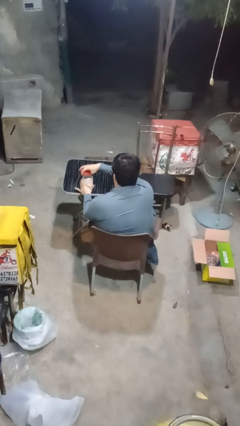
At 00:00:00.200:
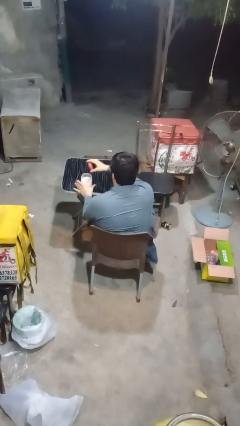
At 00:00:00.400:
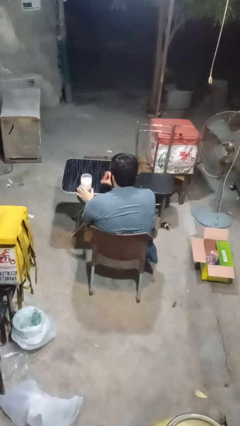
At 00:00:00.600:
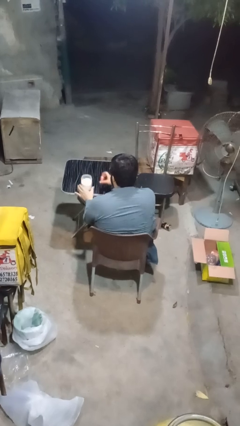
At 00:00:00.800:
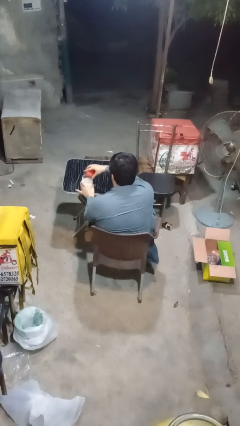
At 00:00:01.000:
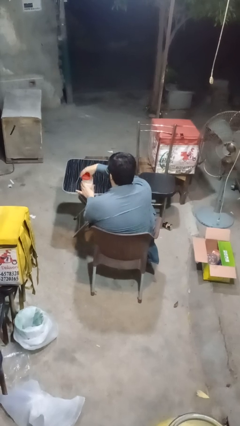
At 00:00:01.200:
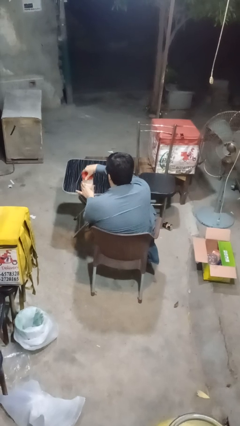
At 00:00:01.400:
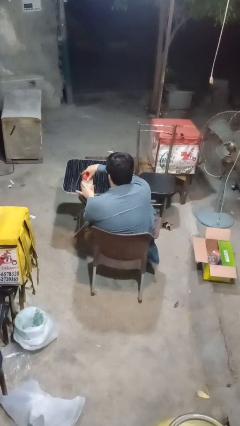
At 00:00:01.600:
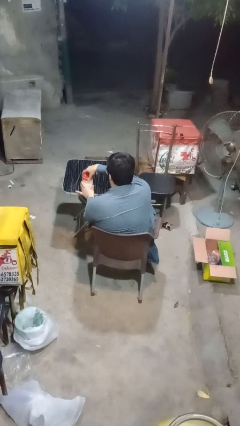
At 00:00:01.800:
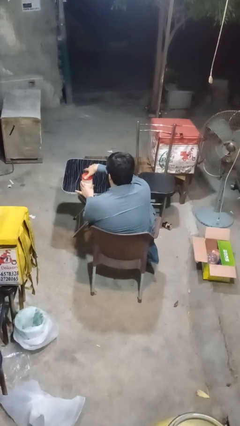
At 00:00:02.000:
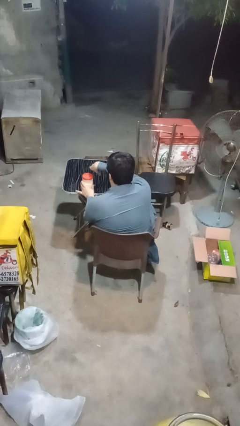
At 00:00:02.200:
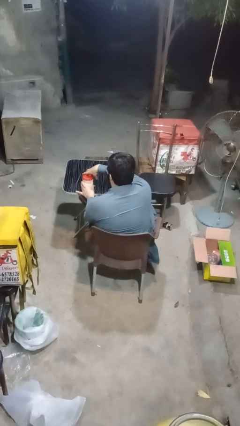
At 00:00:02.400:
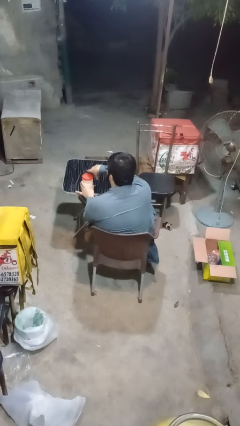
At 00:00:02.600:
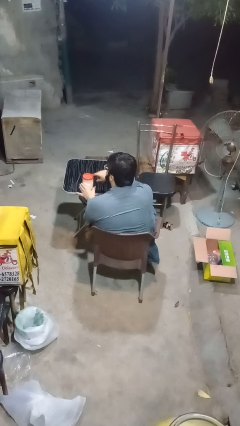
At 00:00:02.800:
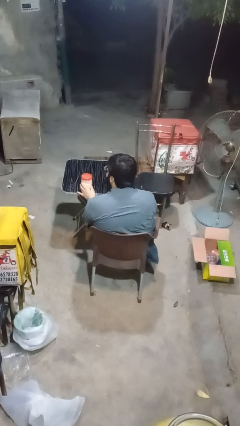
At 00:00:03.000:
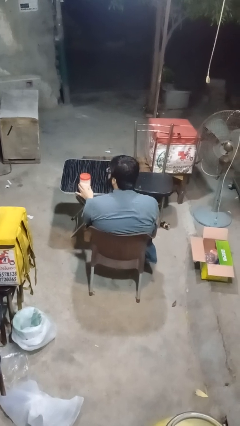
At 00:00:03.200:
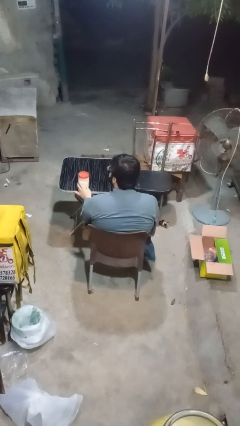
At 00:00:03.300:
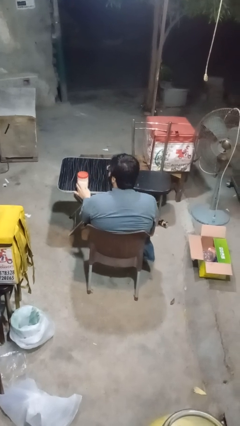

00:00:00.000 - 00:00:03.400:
person closes jar

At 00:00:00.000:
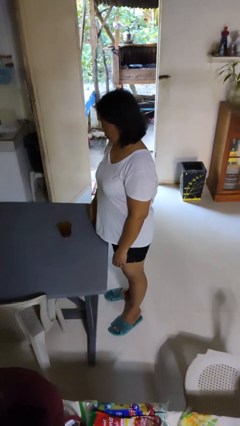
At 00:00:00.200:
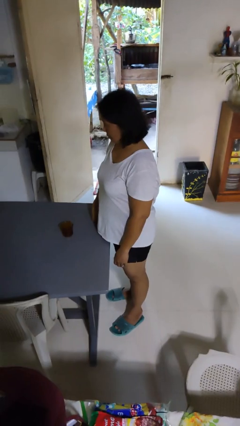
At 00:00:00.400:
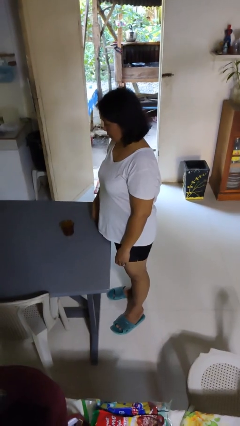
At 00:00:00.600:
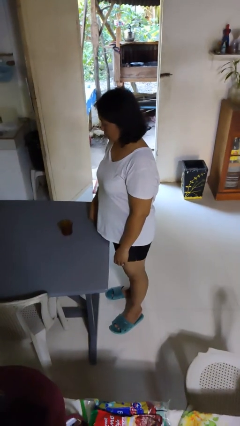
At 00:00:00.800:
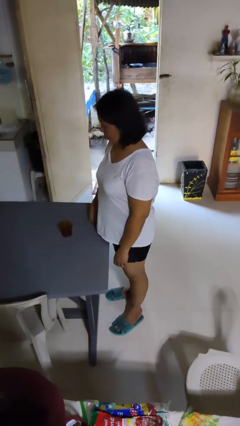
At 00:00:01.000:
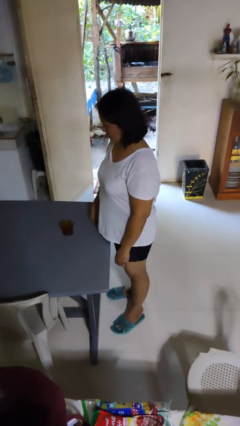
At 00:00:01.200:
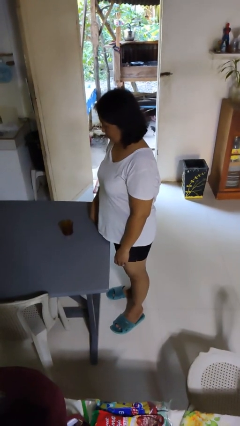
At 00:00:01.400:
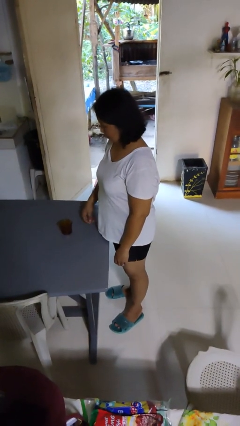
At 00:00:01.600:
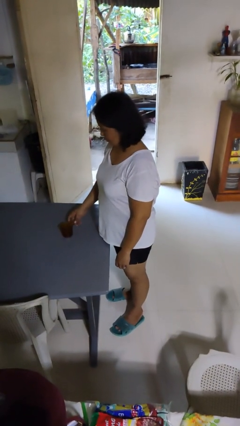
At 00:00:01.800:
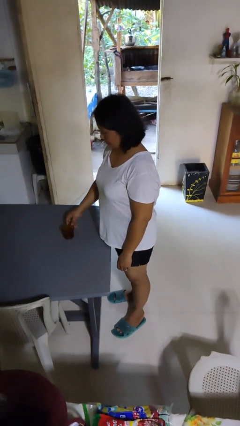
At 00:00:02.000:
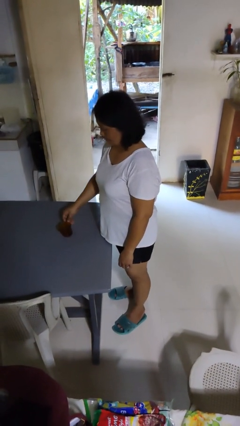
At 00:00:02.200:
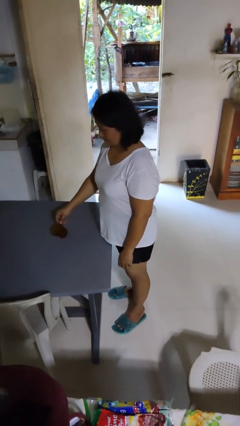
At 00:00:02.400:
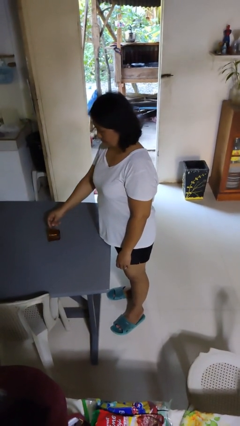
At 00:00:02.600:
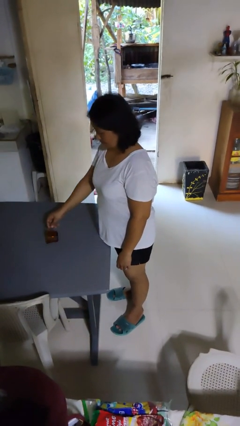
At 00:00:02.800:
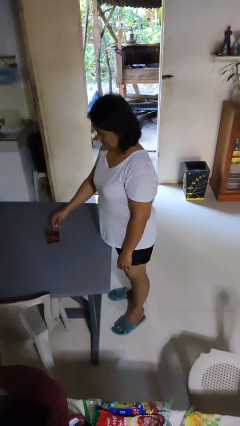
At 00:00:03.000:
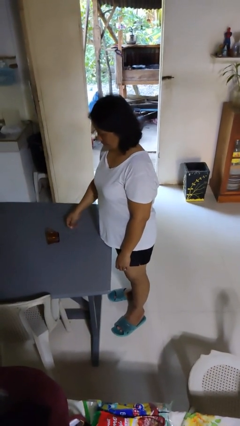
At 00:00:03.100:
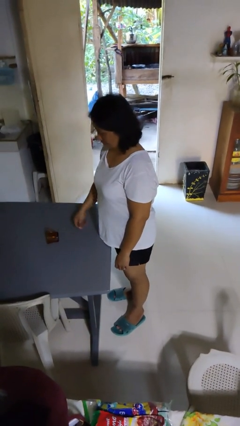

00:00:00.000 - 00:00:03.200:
person knocks over glass

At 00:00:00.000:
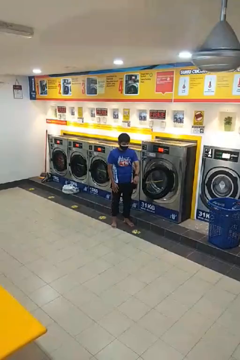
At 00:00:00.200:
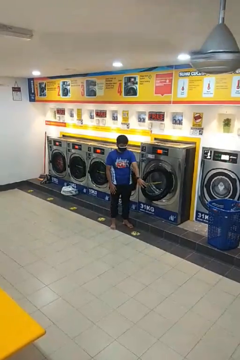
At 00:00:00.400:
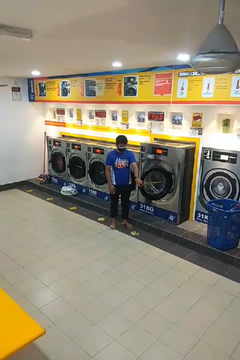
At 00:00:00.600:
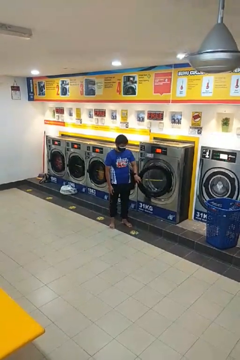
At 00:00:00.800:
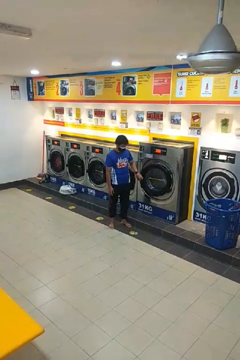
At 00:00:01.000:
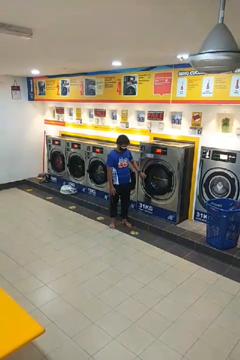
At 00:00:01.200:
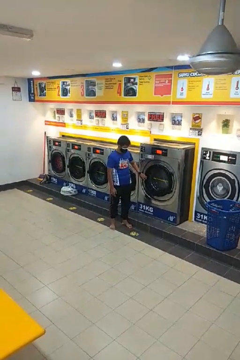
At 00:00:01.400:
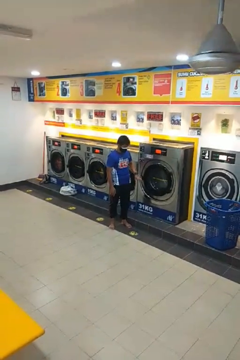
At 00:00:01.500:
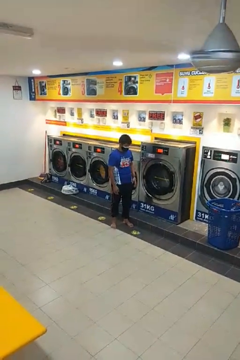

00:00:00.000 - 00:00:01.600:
person closes clothes washer

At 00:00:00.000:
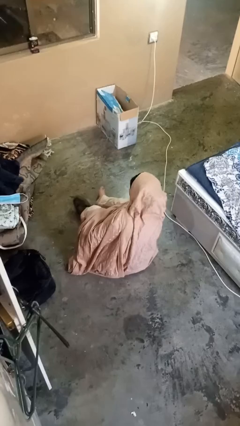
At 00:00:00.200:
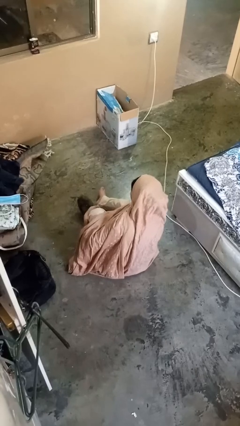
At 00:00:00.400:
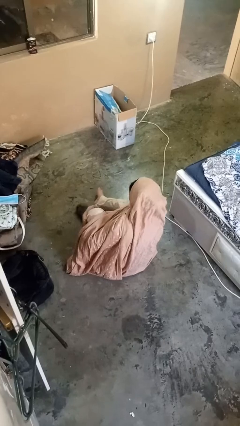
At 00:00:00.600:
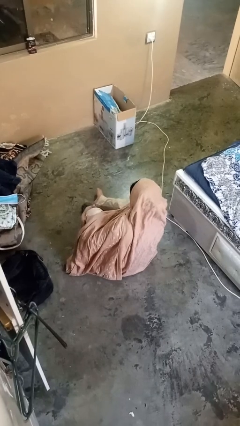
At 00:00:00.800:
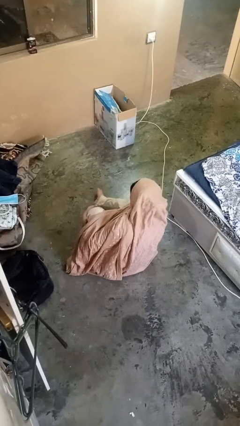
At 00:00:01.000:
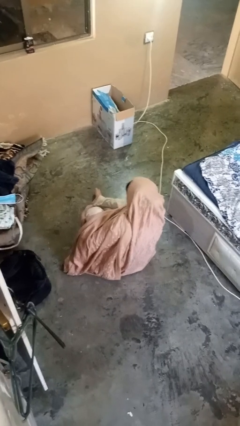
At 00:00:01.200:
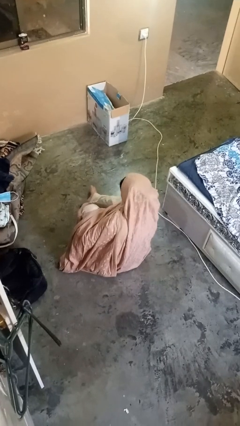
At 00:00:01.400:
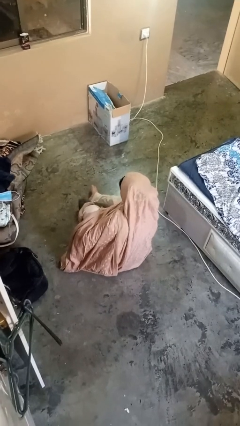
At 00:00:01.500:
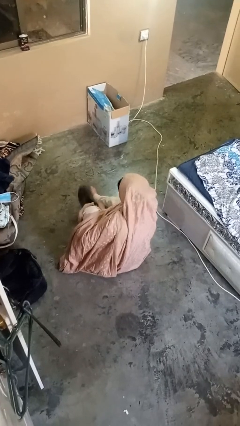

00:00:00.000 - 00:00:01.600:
person puts on shoes

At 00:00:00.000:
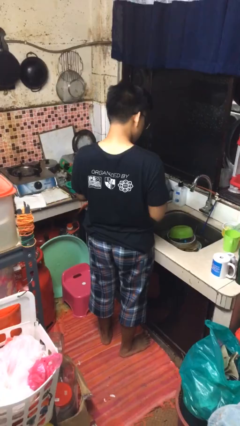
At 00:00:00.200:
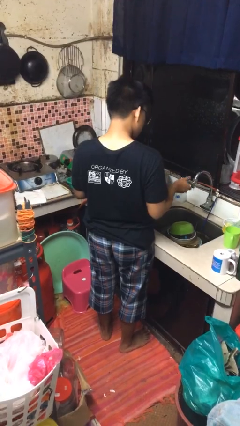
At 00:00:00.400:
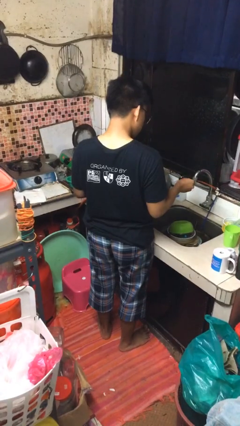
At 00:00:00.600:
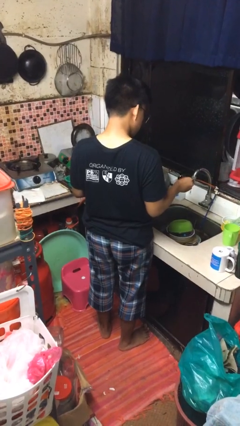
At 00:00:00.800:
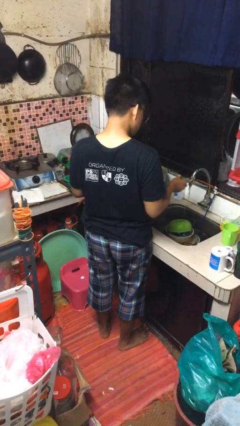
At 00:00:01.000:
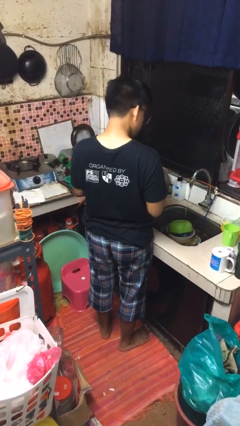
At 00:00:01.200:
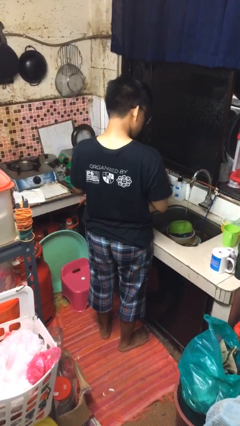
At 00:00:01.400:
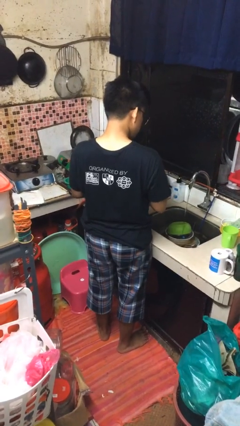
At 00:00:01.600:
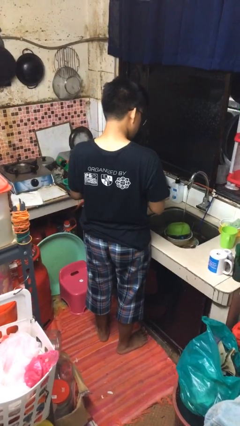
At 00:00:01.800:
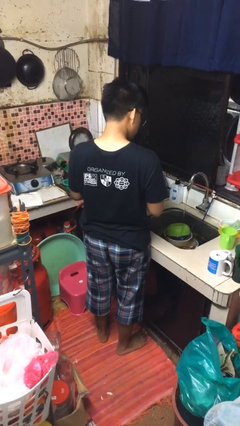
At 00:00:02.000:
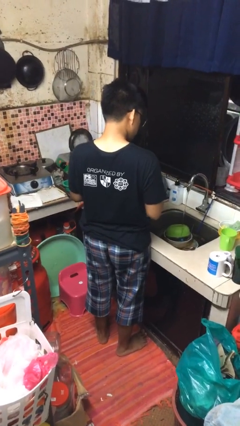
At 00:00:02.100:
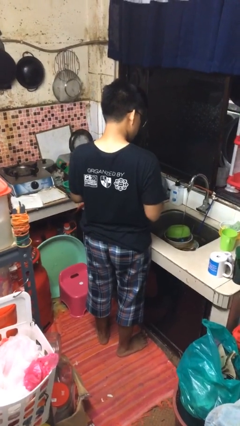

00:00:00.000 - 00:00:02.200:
person turns on faucet

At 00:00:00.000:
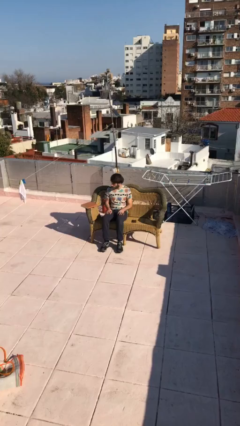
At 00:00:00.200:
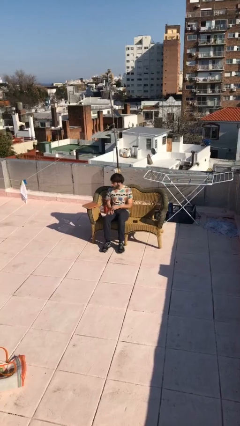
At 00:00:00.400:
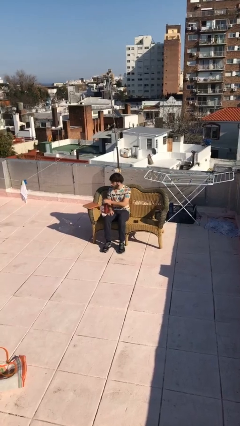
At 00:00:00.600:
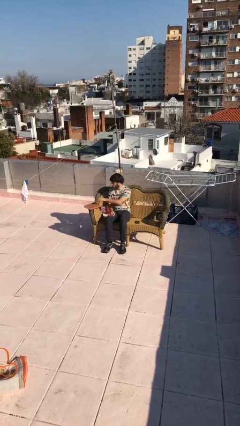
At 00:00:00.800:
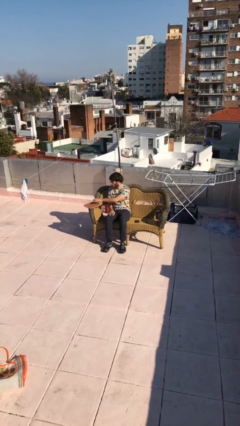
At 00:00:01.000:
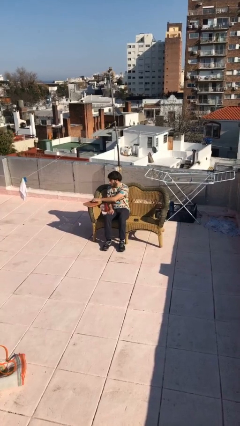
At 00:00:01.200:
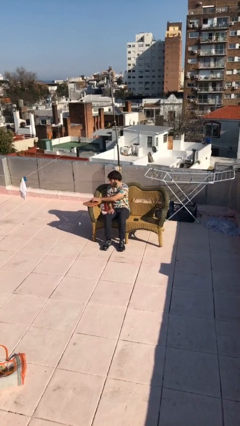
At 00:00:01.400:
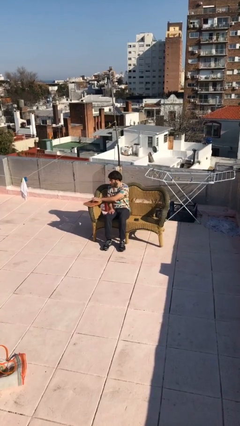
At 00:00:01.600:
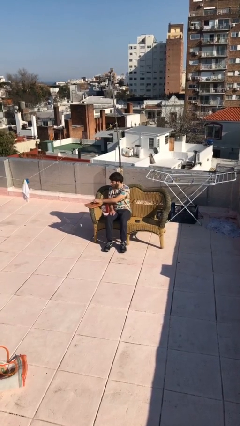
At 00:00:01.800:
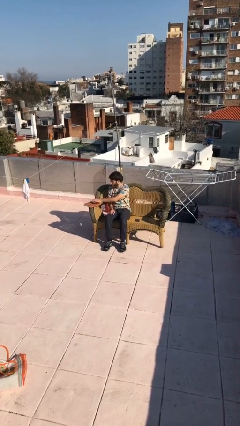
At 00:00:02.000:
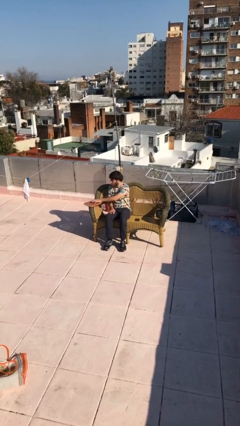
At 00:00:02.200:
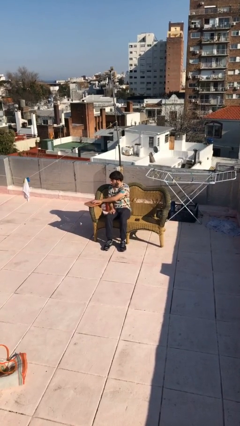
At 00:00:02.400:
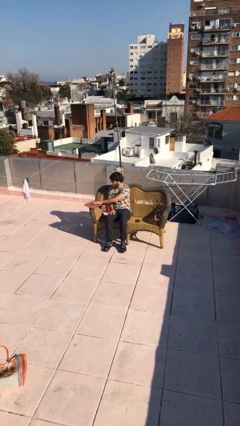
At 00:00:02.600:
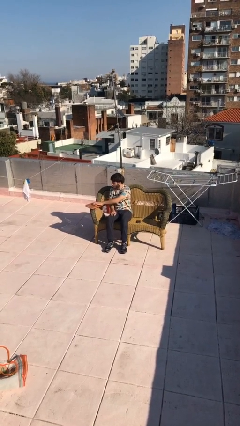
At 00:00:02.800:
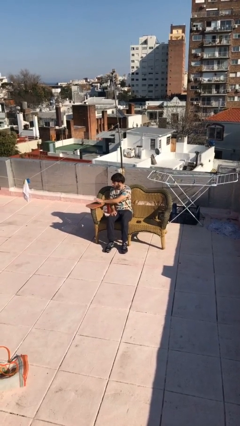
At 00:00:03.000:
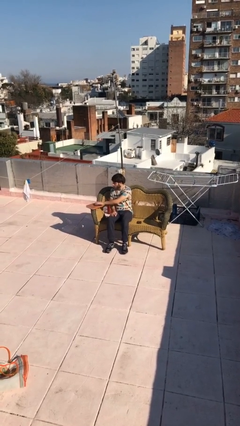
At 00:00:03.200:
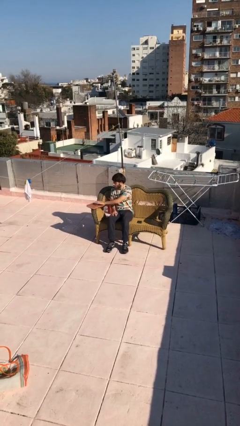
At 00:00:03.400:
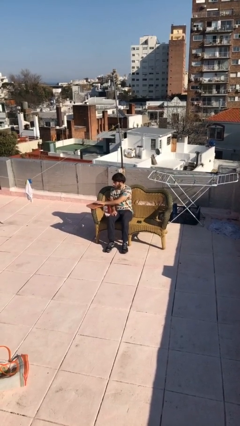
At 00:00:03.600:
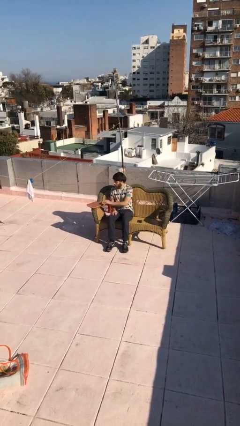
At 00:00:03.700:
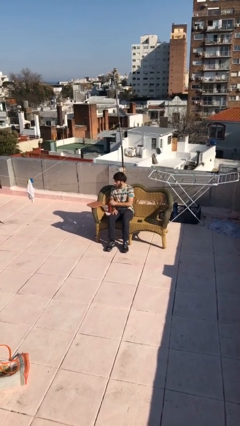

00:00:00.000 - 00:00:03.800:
person taps object with finger

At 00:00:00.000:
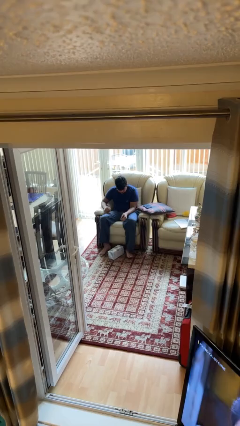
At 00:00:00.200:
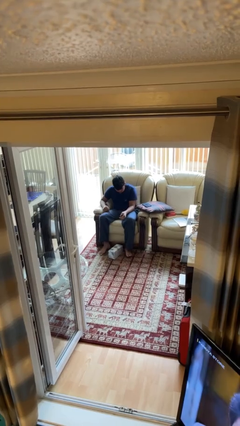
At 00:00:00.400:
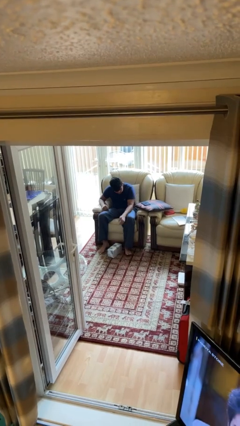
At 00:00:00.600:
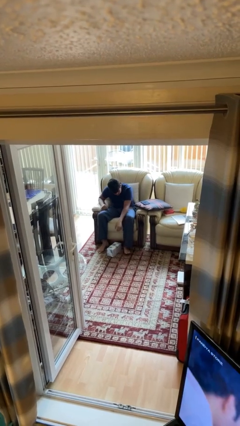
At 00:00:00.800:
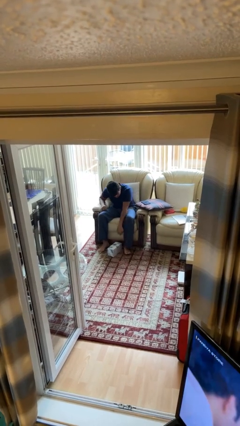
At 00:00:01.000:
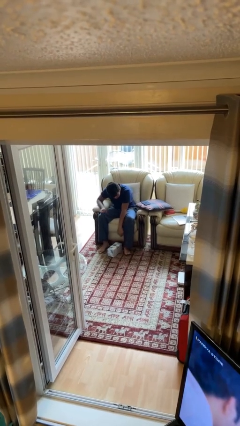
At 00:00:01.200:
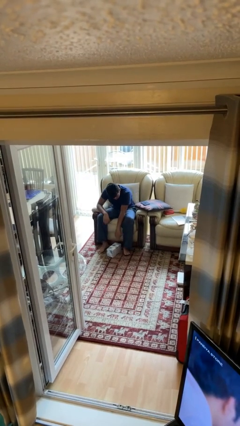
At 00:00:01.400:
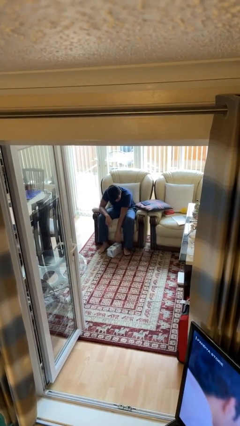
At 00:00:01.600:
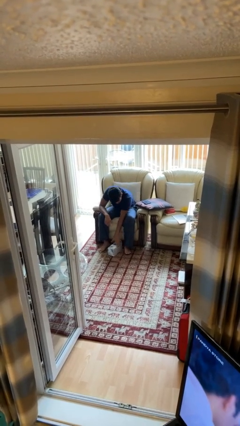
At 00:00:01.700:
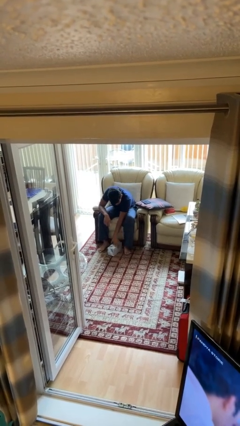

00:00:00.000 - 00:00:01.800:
person drops object
